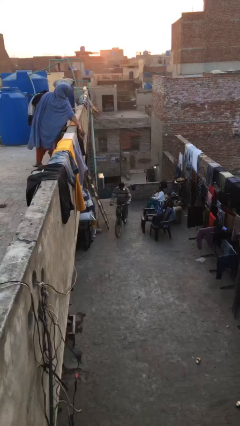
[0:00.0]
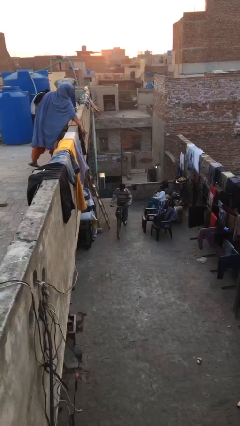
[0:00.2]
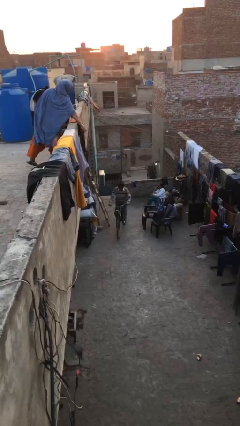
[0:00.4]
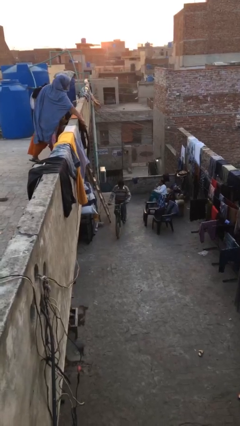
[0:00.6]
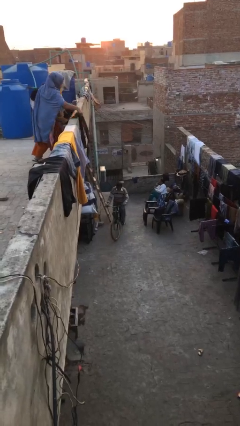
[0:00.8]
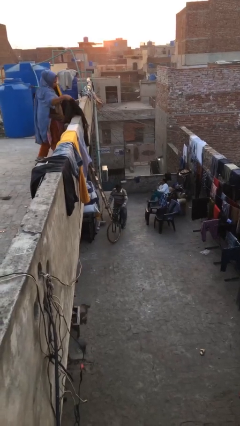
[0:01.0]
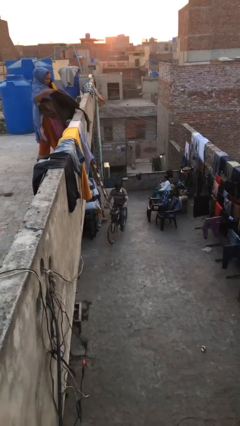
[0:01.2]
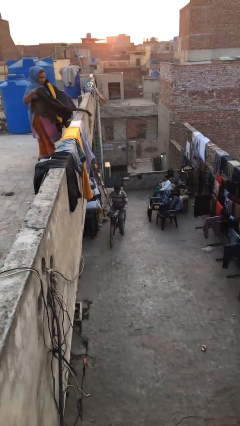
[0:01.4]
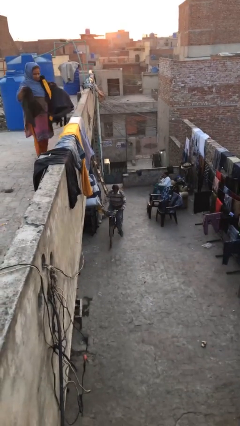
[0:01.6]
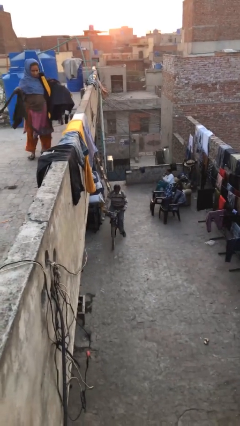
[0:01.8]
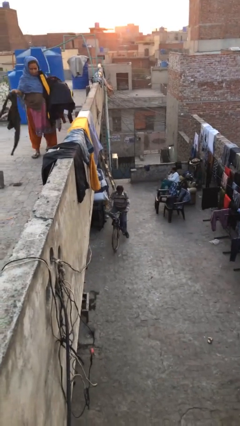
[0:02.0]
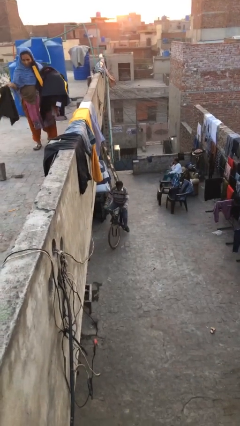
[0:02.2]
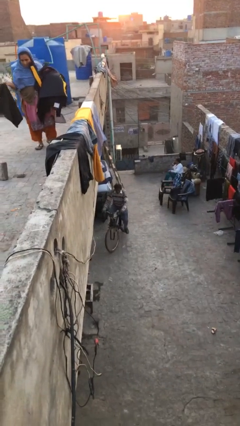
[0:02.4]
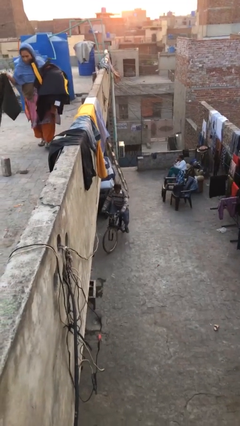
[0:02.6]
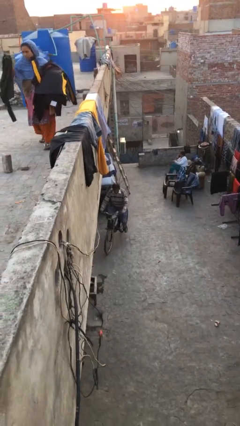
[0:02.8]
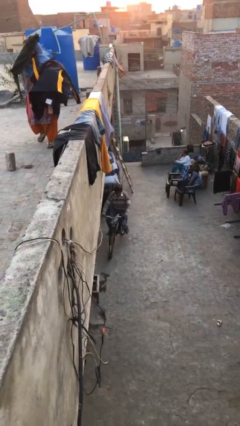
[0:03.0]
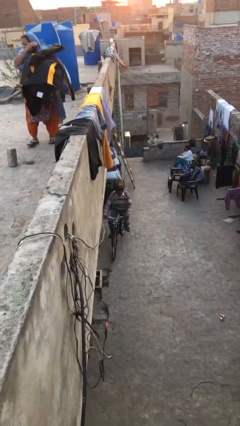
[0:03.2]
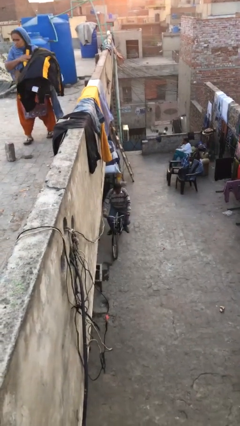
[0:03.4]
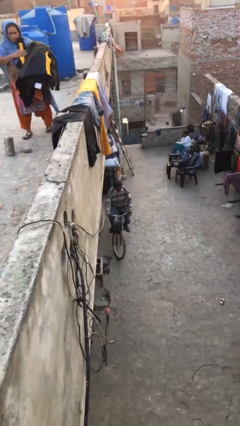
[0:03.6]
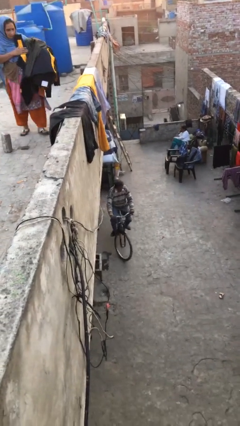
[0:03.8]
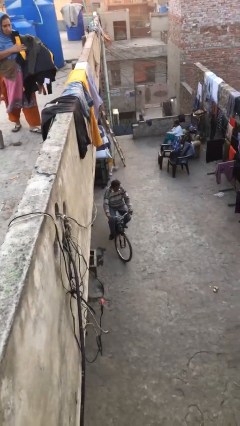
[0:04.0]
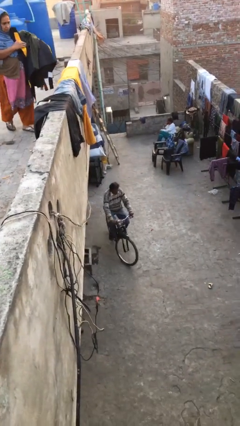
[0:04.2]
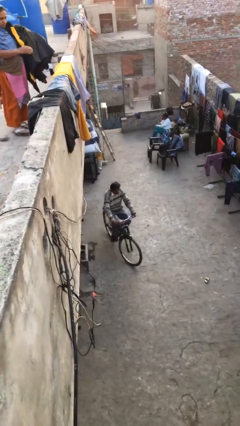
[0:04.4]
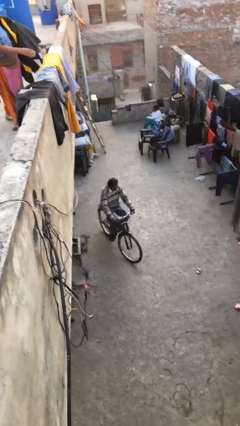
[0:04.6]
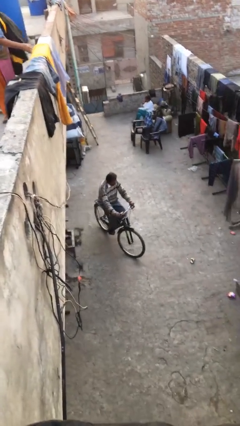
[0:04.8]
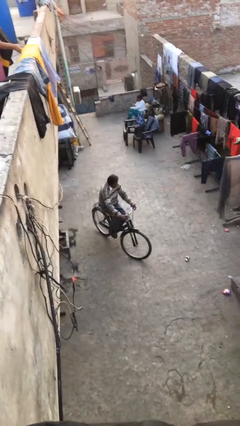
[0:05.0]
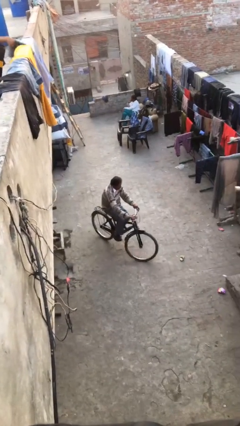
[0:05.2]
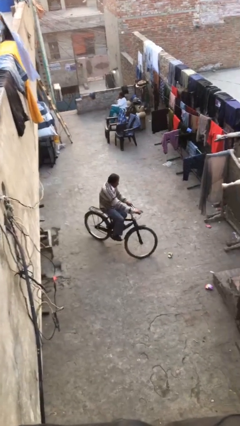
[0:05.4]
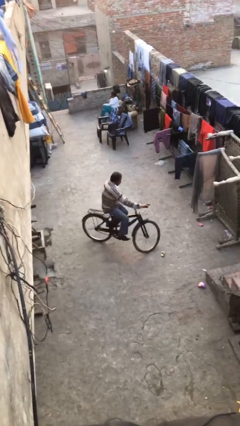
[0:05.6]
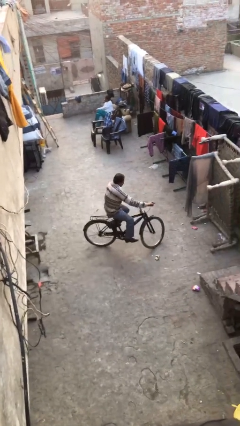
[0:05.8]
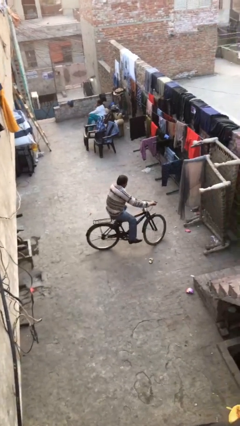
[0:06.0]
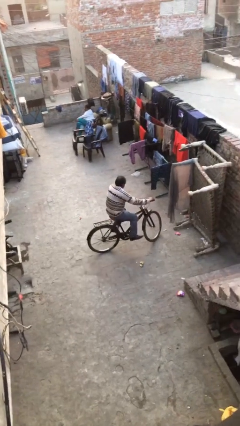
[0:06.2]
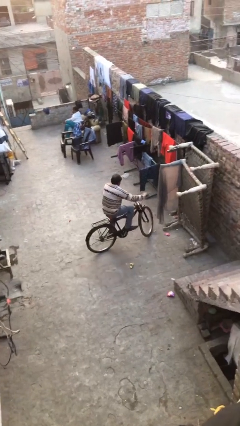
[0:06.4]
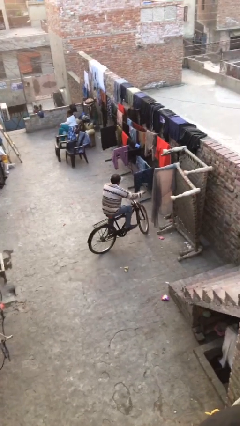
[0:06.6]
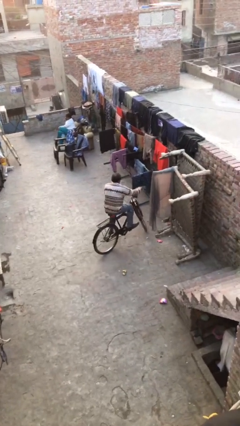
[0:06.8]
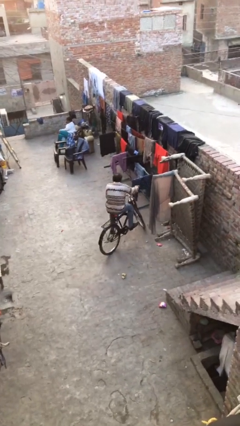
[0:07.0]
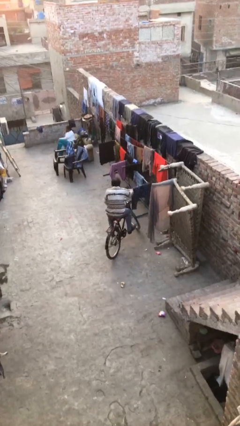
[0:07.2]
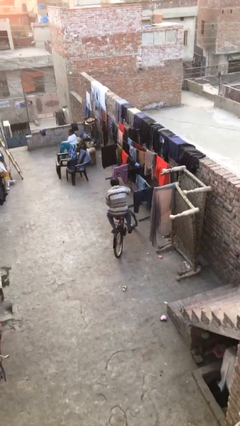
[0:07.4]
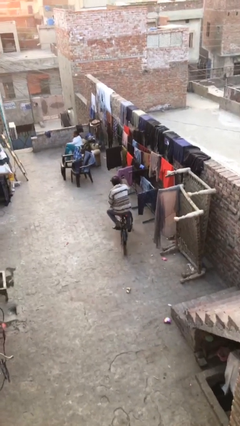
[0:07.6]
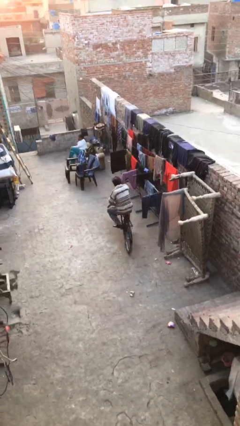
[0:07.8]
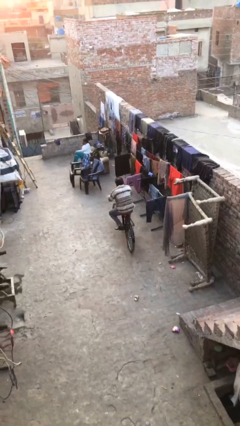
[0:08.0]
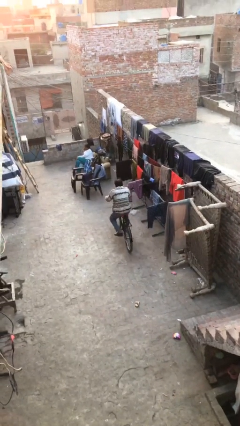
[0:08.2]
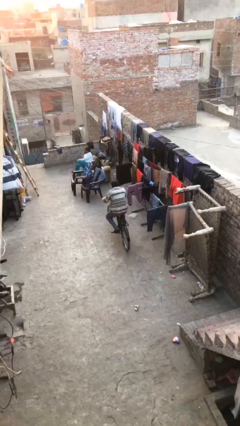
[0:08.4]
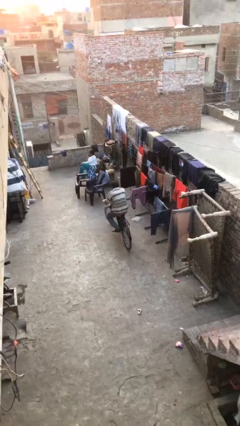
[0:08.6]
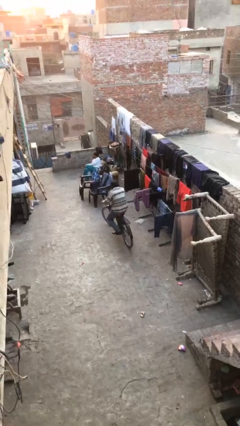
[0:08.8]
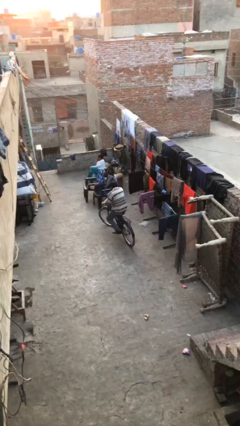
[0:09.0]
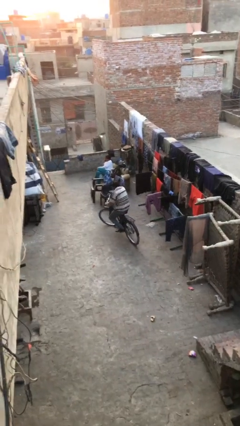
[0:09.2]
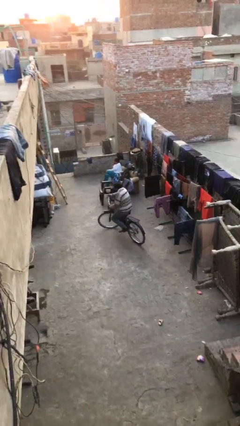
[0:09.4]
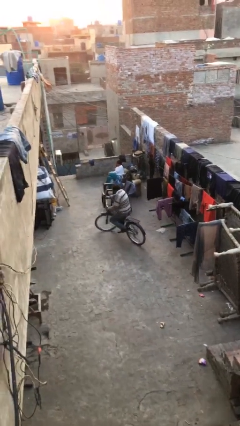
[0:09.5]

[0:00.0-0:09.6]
person rides bicycle

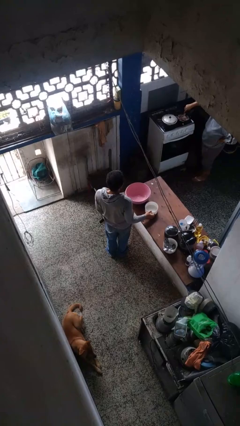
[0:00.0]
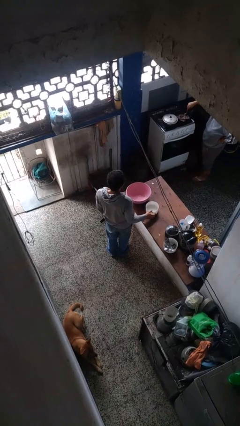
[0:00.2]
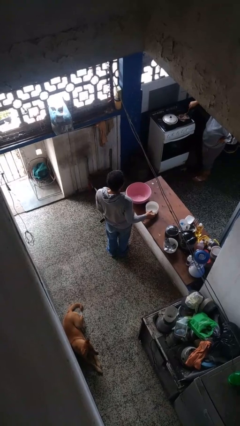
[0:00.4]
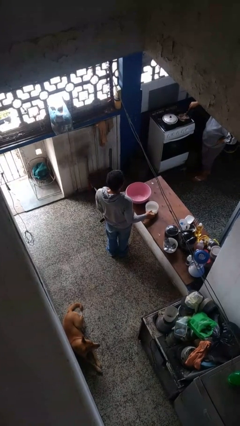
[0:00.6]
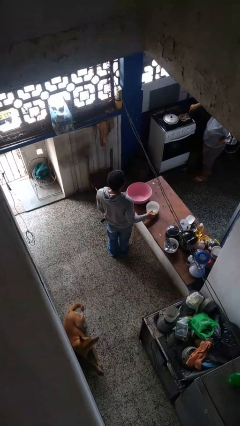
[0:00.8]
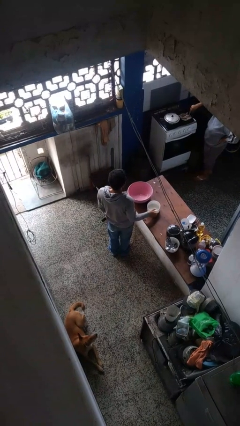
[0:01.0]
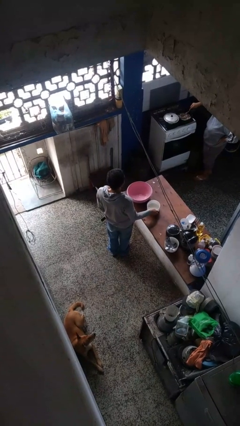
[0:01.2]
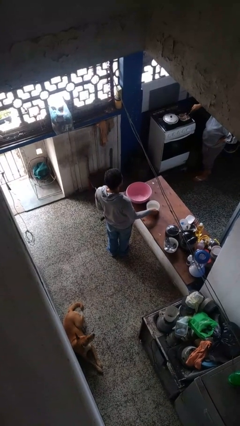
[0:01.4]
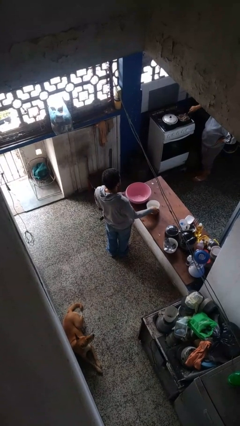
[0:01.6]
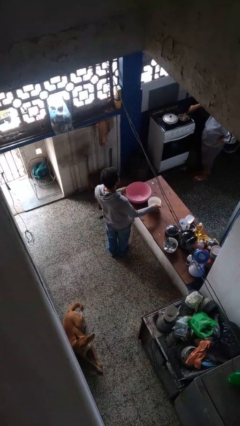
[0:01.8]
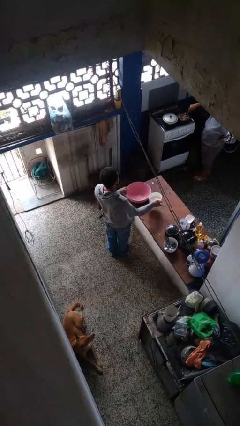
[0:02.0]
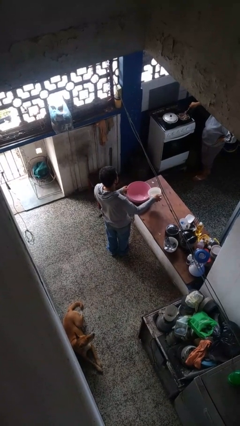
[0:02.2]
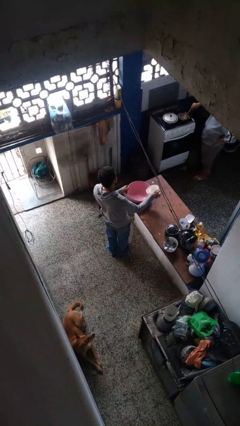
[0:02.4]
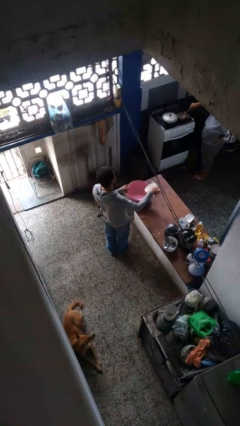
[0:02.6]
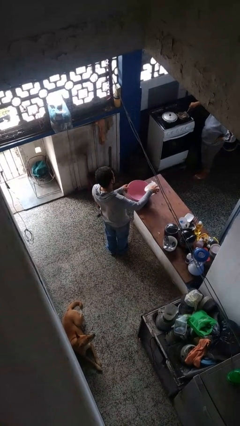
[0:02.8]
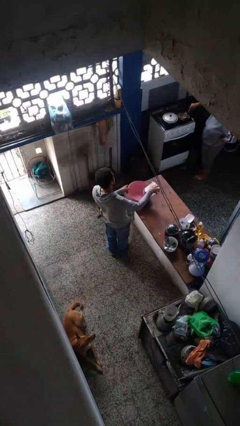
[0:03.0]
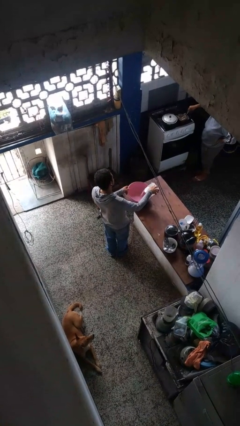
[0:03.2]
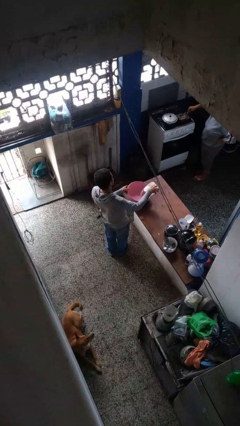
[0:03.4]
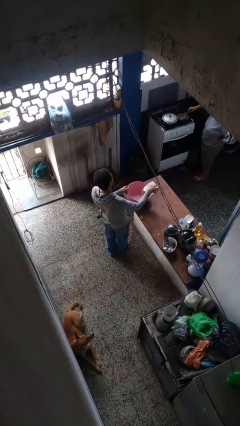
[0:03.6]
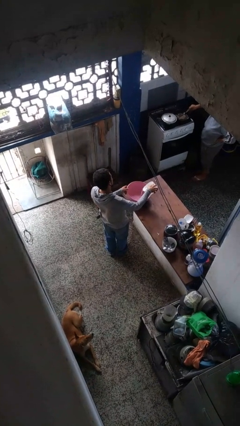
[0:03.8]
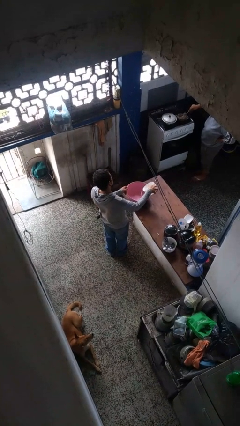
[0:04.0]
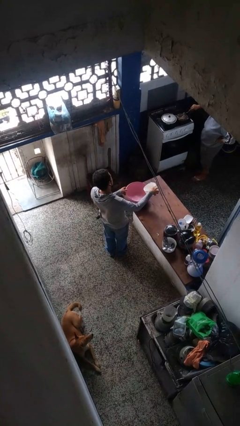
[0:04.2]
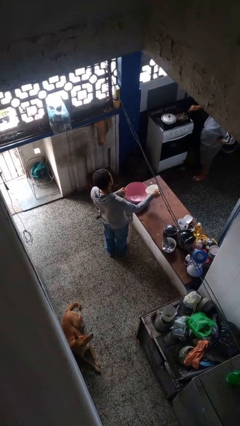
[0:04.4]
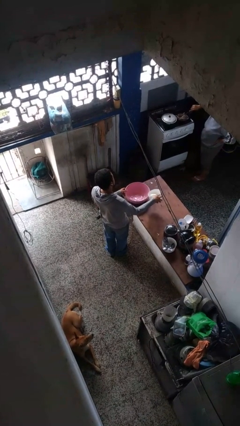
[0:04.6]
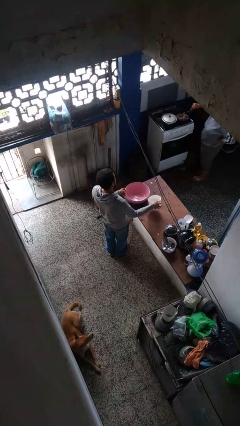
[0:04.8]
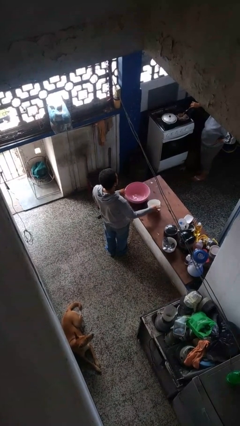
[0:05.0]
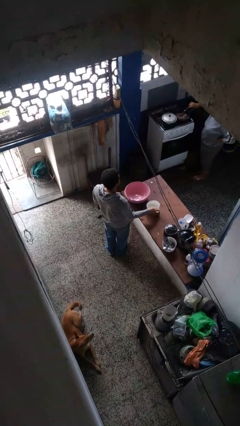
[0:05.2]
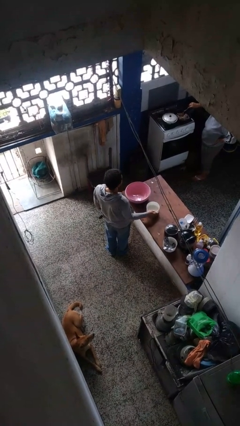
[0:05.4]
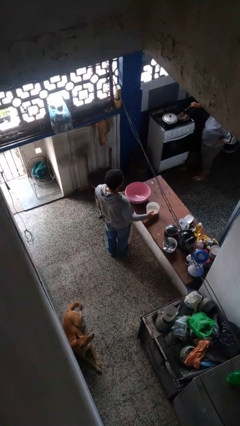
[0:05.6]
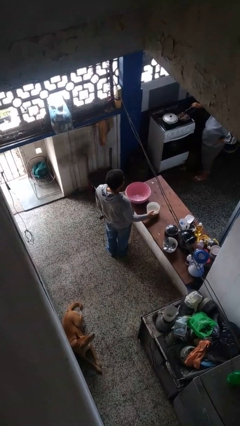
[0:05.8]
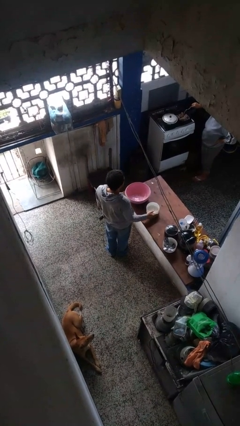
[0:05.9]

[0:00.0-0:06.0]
person pours into bowl

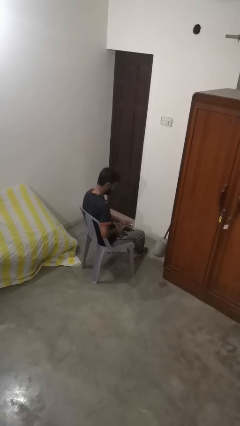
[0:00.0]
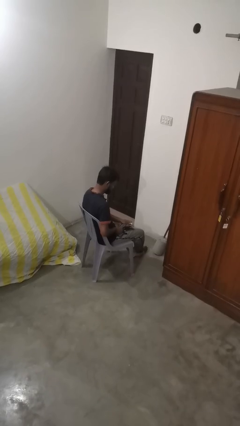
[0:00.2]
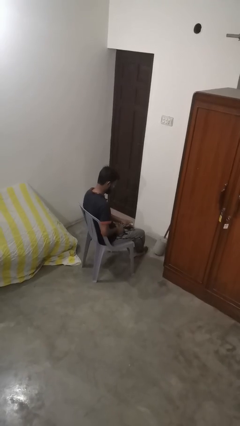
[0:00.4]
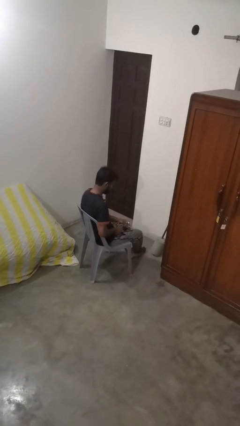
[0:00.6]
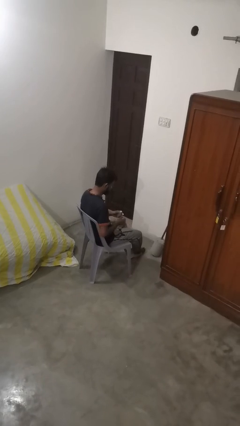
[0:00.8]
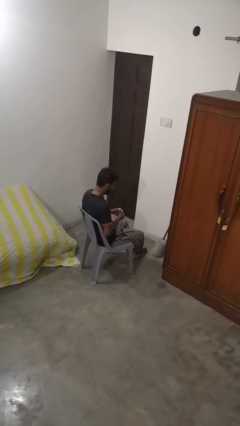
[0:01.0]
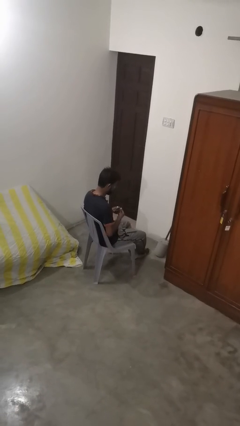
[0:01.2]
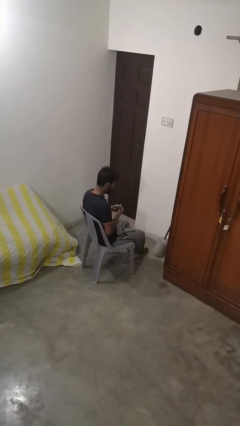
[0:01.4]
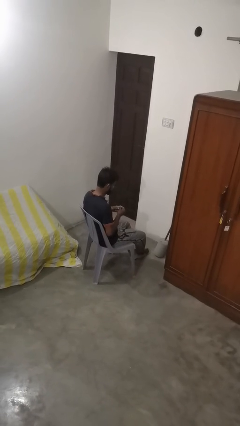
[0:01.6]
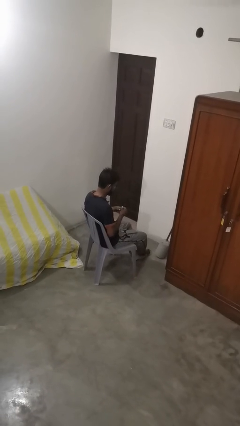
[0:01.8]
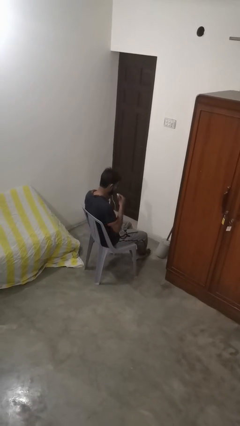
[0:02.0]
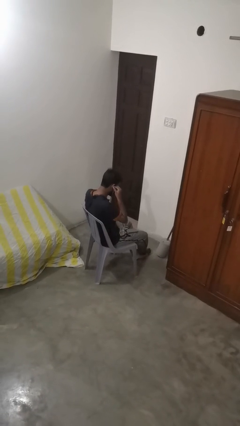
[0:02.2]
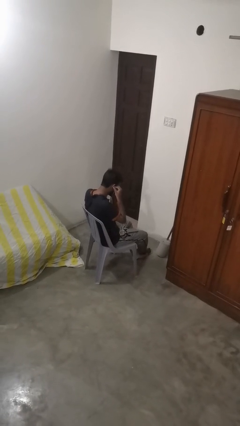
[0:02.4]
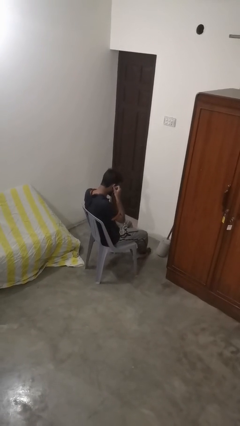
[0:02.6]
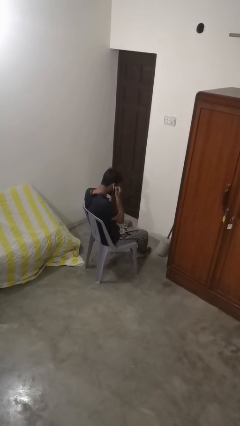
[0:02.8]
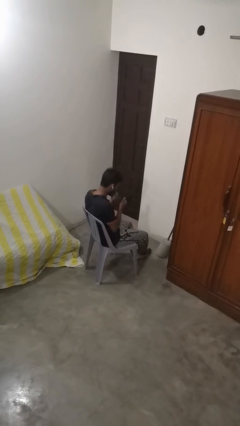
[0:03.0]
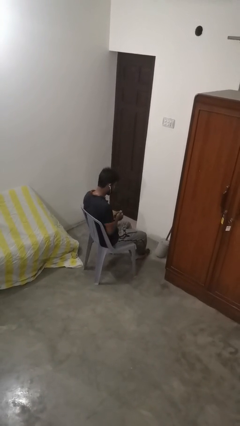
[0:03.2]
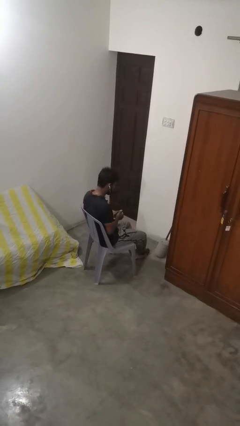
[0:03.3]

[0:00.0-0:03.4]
person puts on headphones
